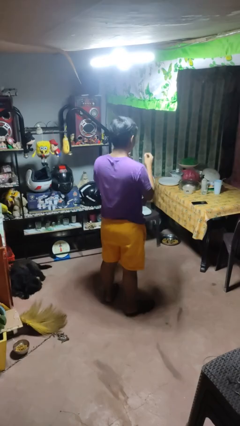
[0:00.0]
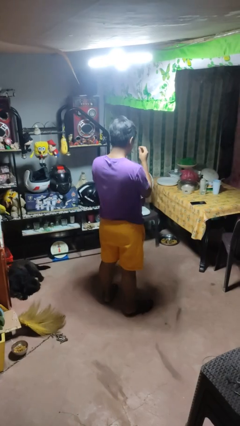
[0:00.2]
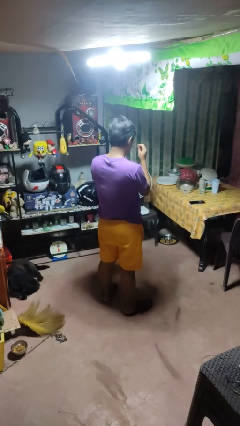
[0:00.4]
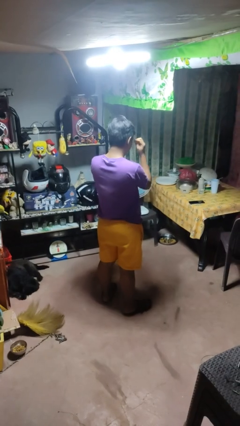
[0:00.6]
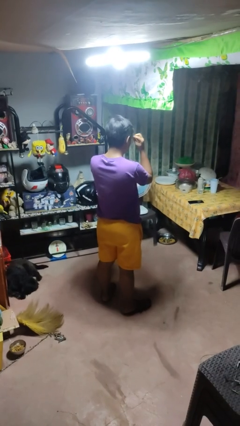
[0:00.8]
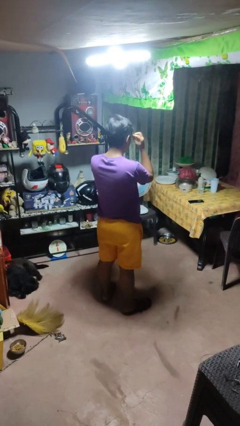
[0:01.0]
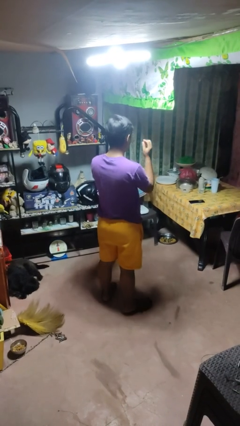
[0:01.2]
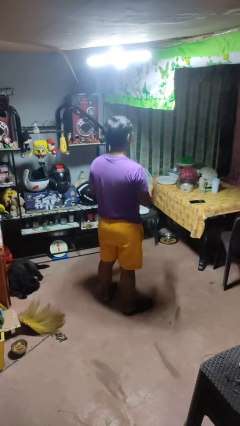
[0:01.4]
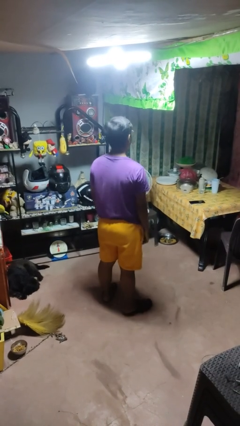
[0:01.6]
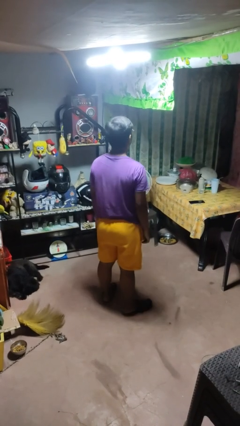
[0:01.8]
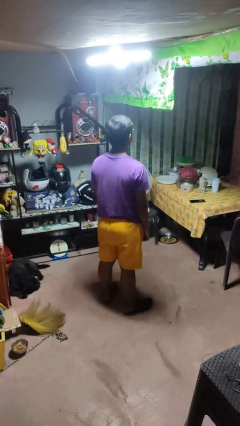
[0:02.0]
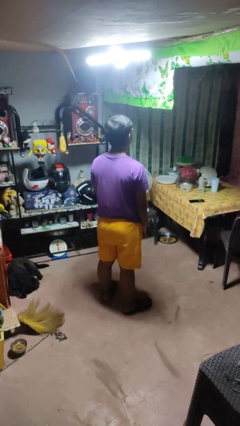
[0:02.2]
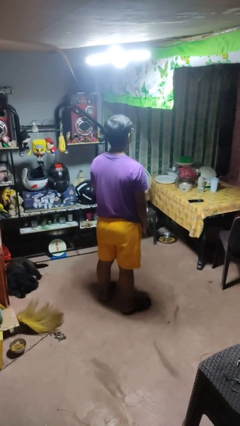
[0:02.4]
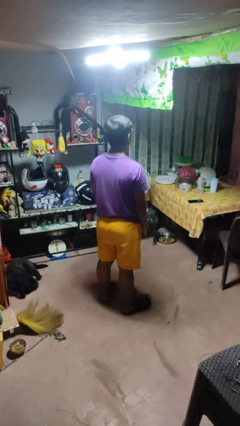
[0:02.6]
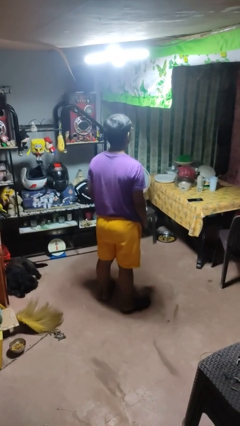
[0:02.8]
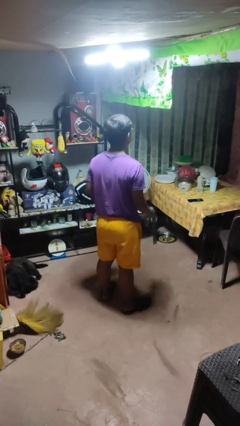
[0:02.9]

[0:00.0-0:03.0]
person puts on glasses

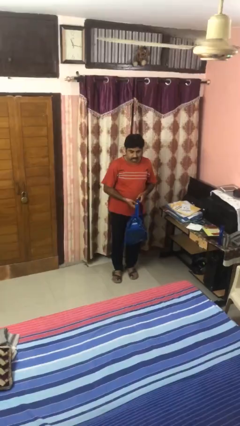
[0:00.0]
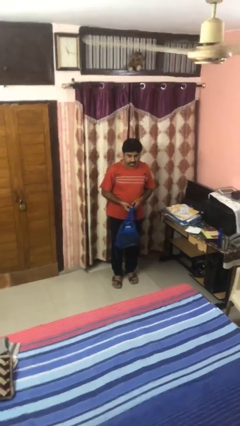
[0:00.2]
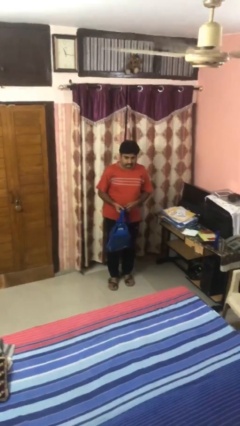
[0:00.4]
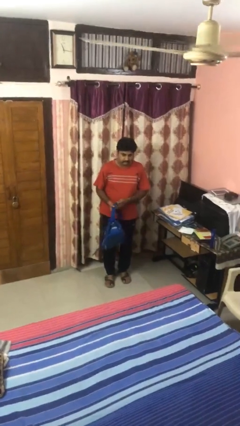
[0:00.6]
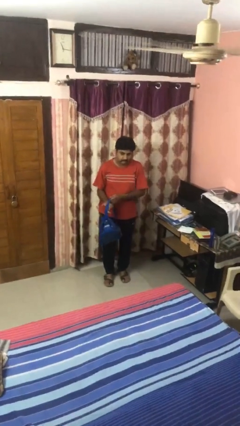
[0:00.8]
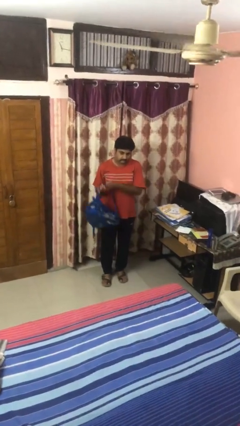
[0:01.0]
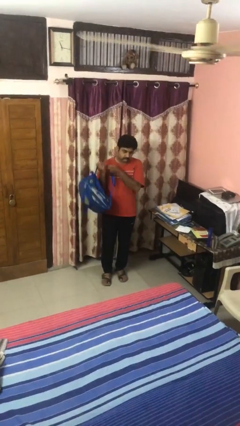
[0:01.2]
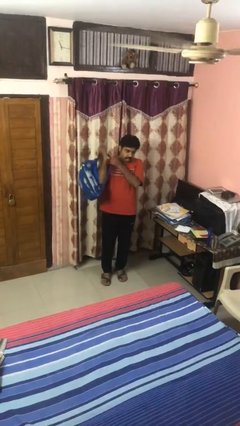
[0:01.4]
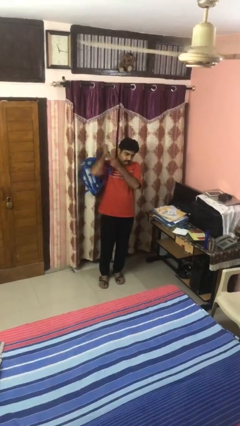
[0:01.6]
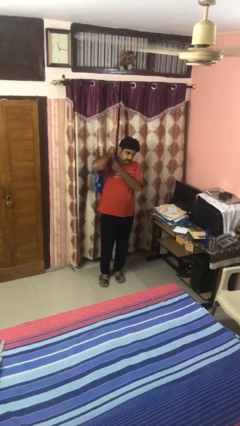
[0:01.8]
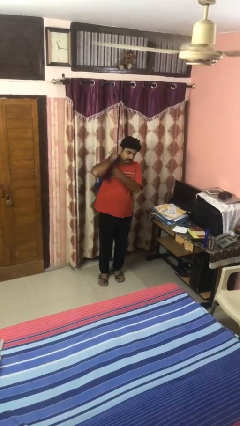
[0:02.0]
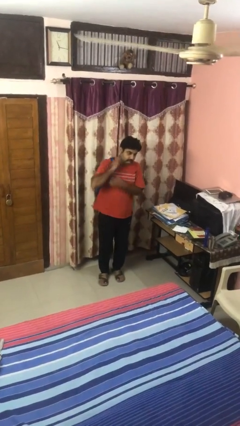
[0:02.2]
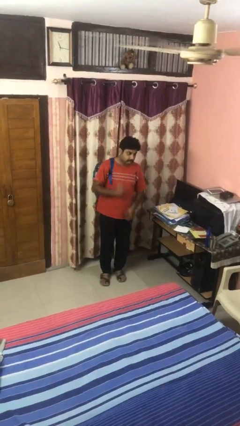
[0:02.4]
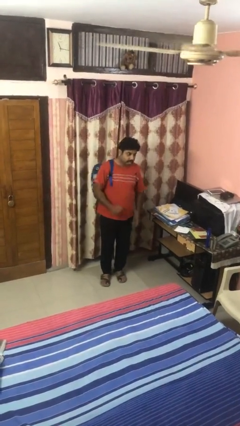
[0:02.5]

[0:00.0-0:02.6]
person puts on backpack

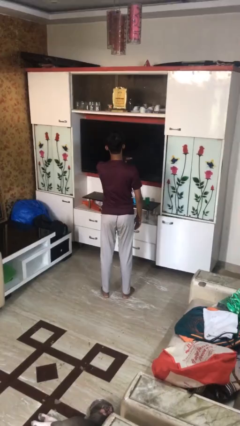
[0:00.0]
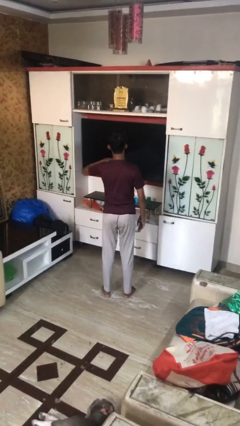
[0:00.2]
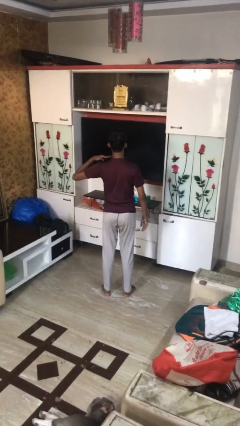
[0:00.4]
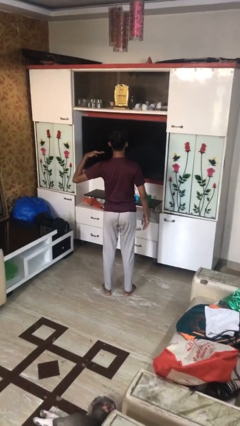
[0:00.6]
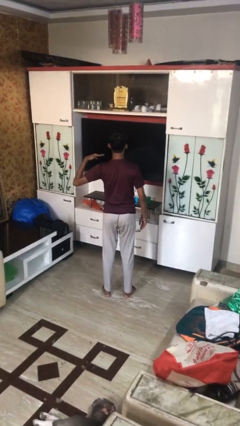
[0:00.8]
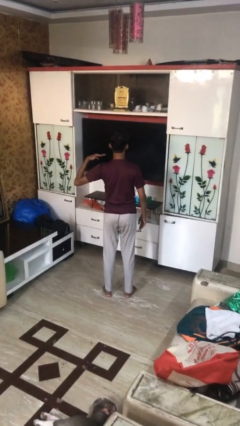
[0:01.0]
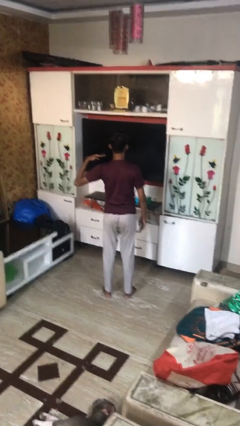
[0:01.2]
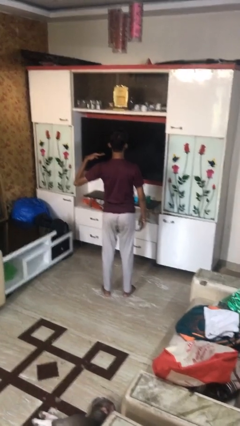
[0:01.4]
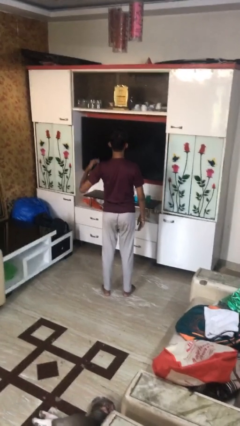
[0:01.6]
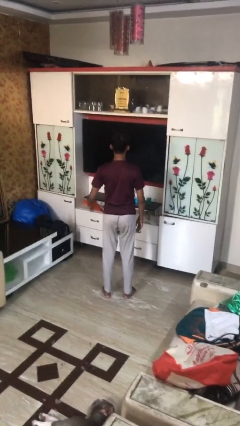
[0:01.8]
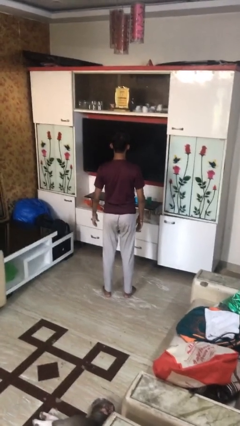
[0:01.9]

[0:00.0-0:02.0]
person gestures cut

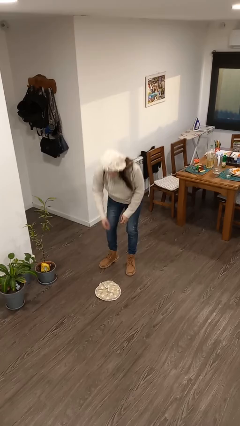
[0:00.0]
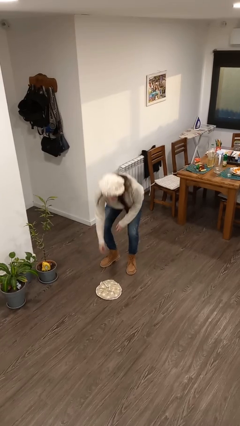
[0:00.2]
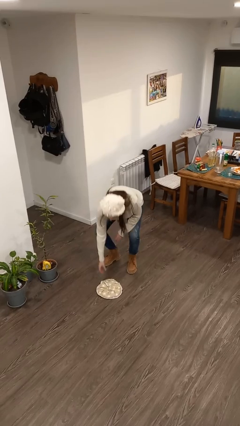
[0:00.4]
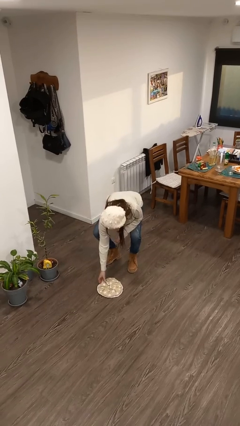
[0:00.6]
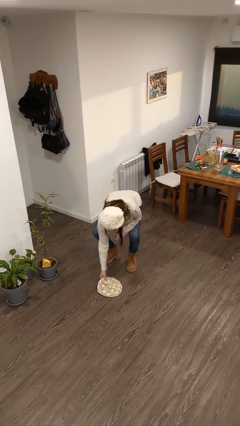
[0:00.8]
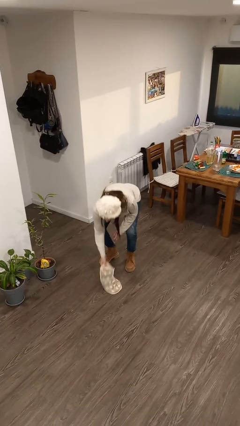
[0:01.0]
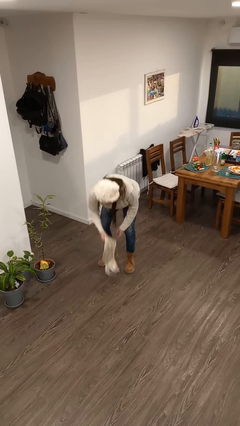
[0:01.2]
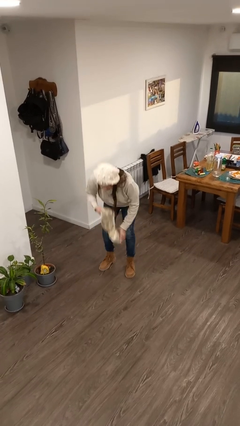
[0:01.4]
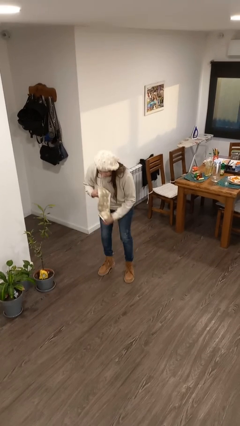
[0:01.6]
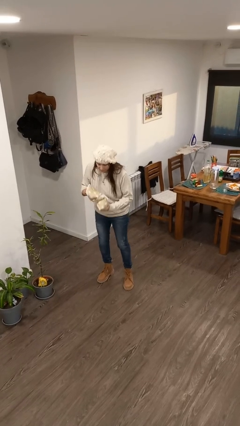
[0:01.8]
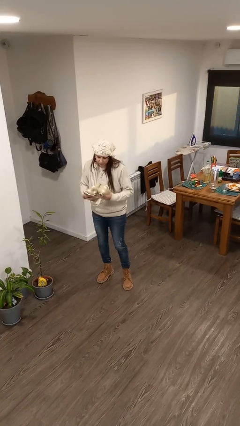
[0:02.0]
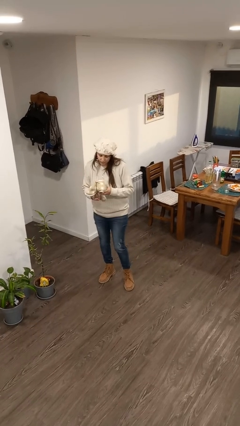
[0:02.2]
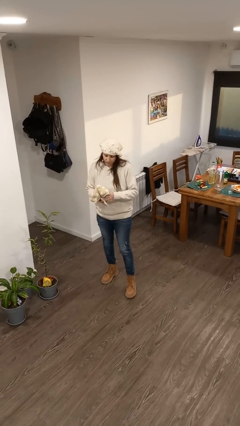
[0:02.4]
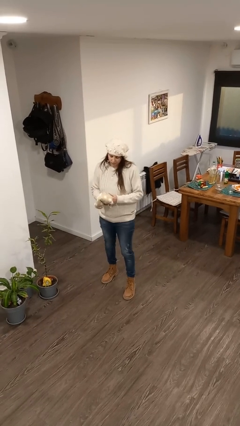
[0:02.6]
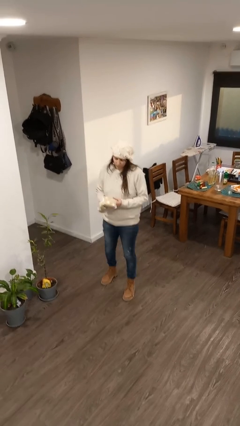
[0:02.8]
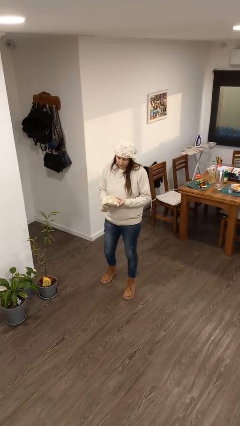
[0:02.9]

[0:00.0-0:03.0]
person picks up object from floor

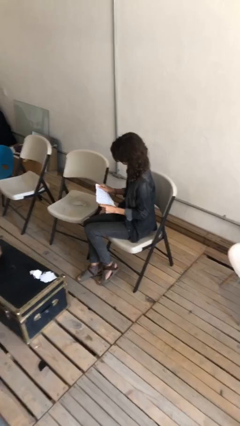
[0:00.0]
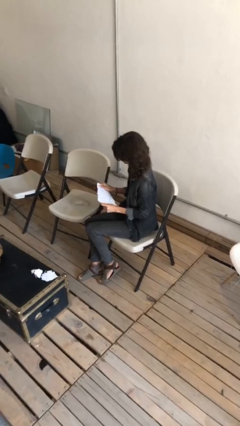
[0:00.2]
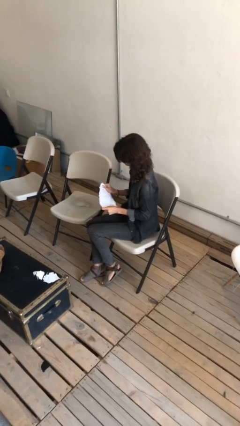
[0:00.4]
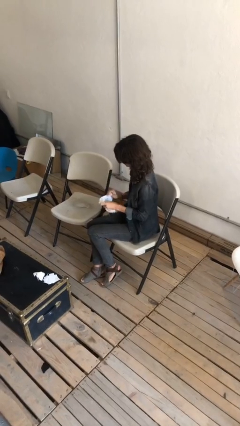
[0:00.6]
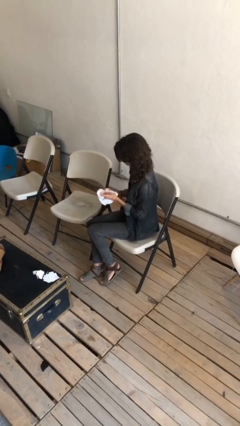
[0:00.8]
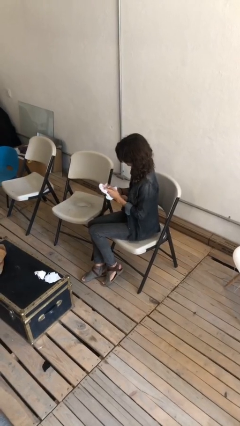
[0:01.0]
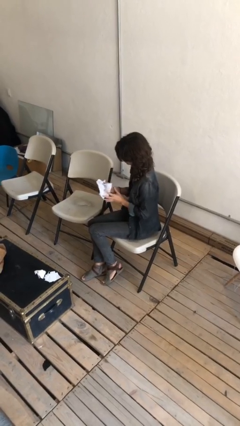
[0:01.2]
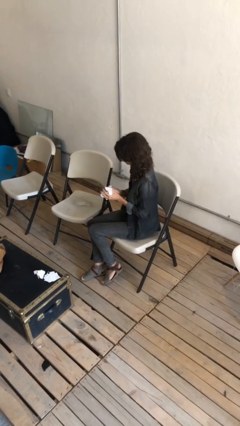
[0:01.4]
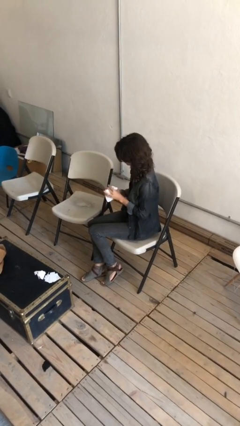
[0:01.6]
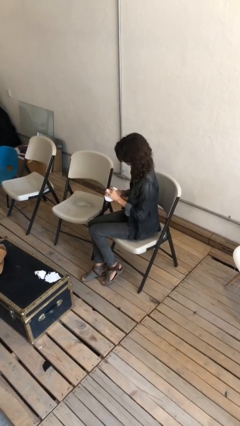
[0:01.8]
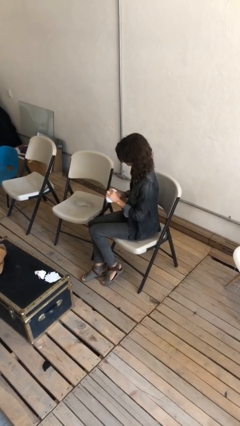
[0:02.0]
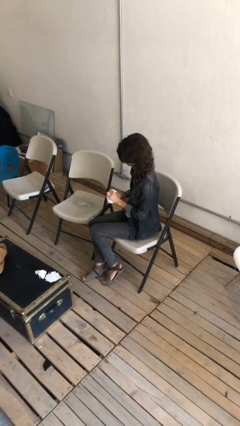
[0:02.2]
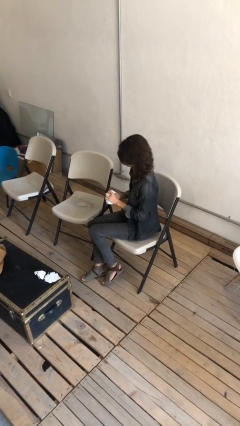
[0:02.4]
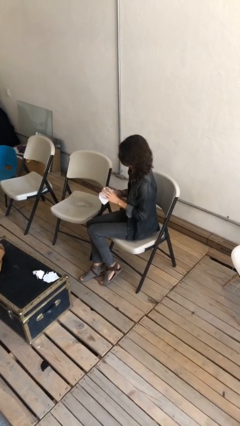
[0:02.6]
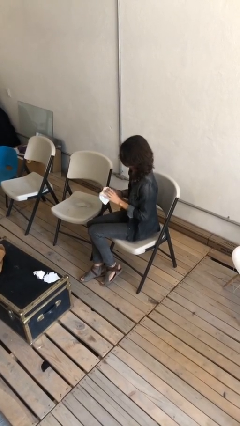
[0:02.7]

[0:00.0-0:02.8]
person crumples paper

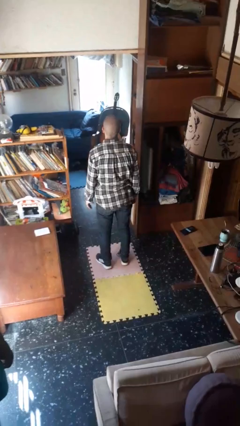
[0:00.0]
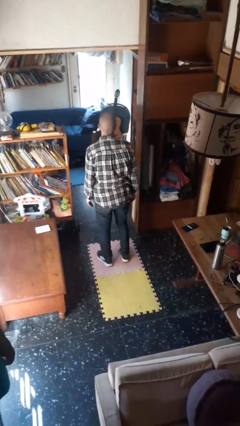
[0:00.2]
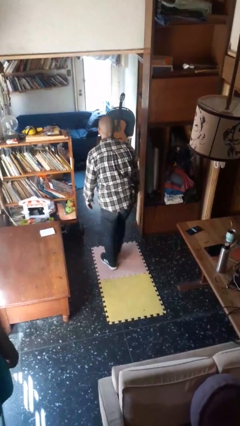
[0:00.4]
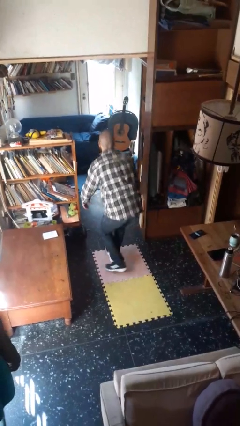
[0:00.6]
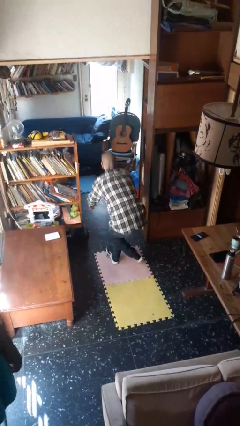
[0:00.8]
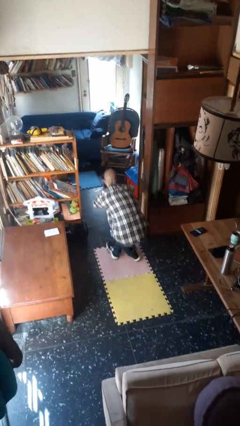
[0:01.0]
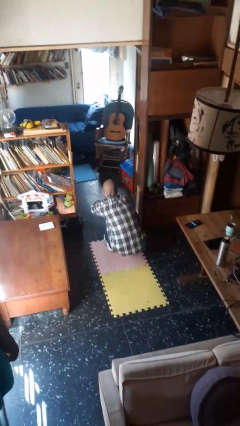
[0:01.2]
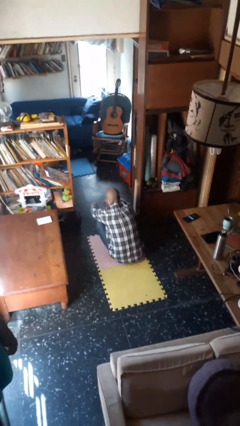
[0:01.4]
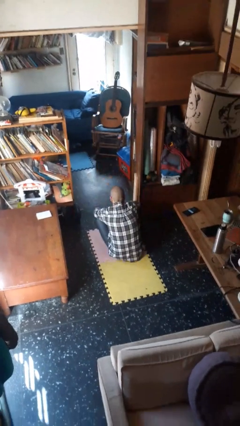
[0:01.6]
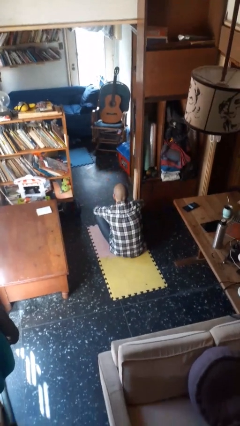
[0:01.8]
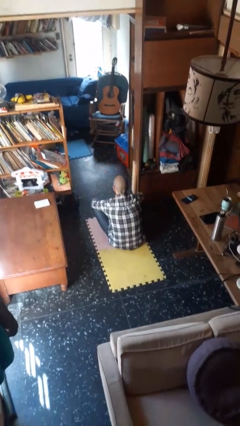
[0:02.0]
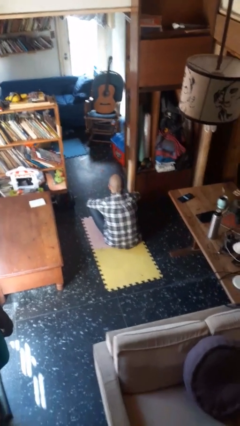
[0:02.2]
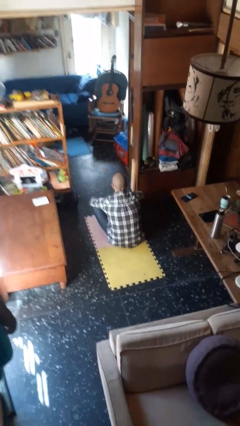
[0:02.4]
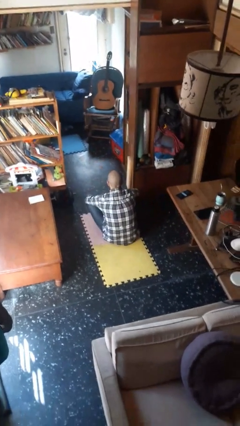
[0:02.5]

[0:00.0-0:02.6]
person sits crisscross

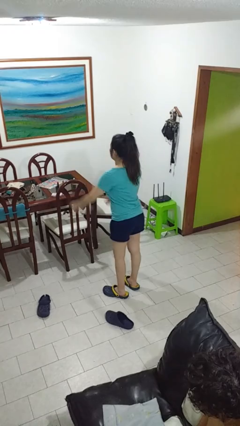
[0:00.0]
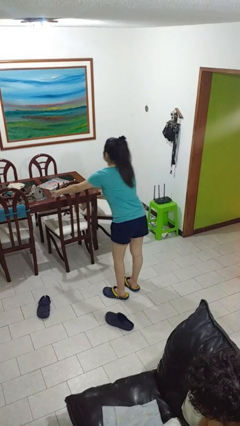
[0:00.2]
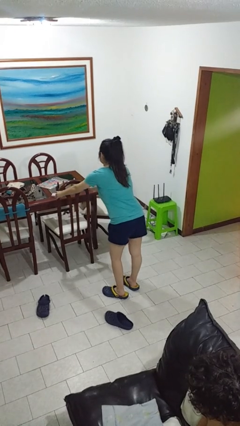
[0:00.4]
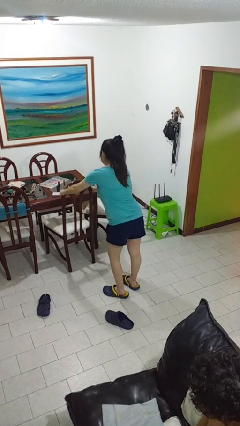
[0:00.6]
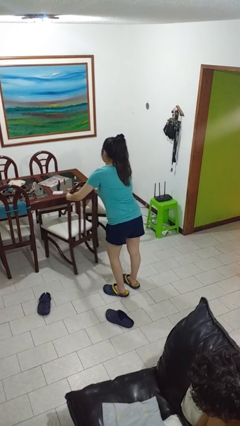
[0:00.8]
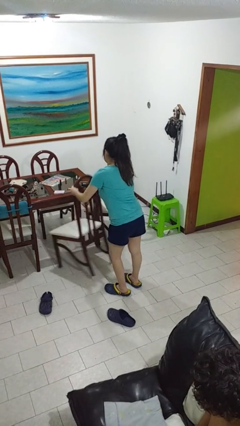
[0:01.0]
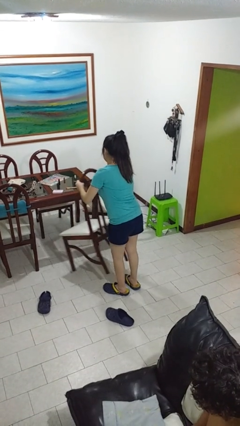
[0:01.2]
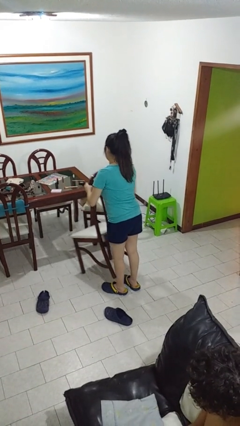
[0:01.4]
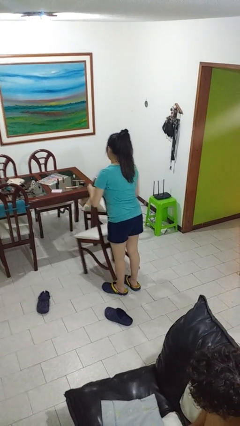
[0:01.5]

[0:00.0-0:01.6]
person pulls out chair
